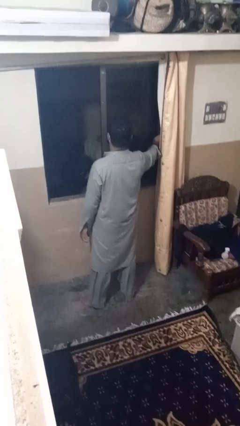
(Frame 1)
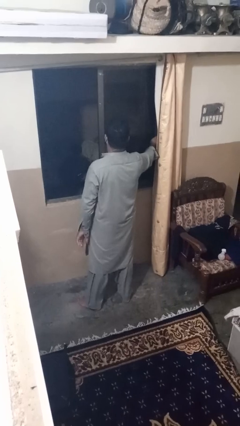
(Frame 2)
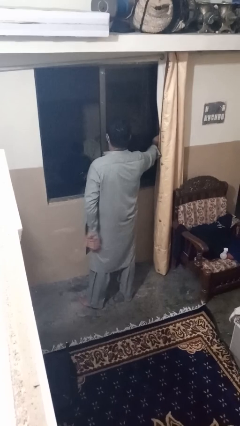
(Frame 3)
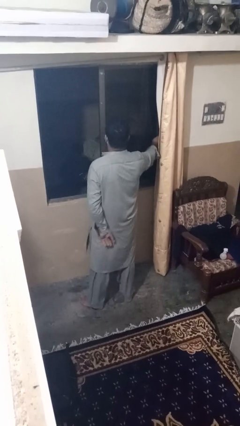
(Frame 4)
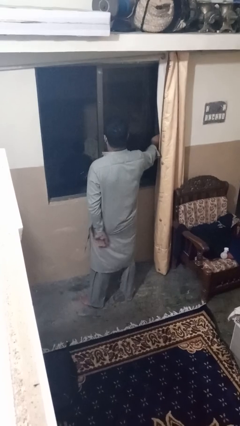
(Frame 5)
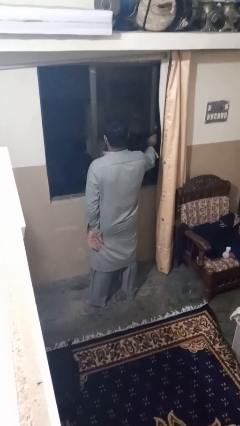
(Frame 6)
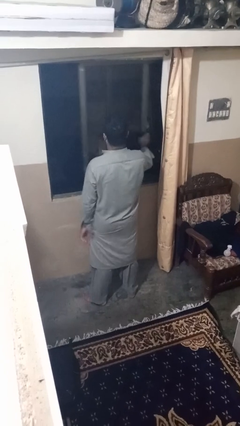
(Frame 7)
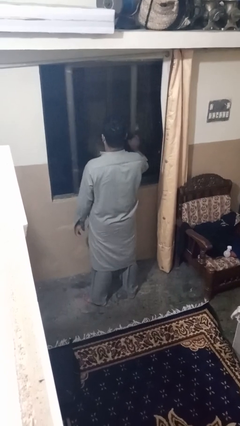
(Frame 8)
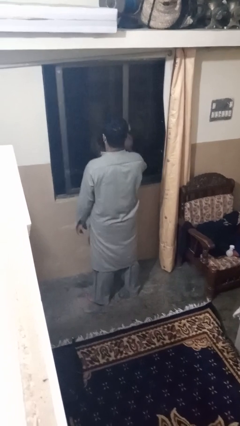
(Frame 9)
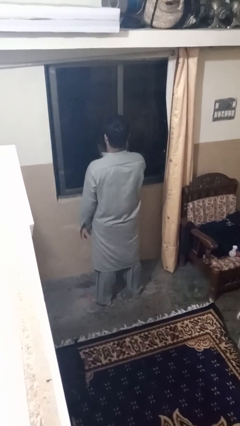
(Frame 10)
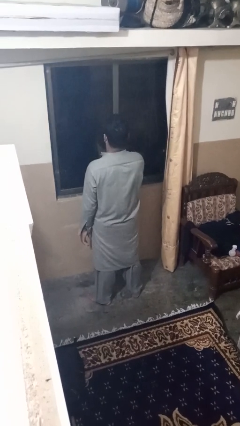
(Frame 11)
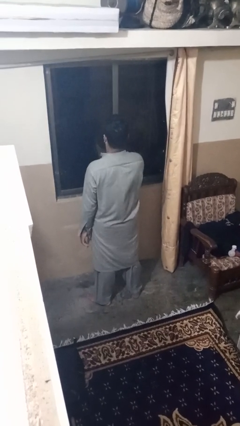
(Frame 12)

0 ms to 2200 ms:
person closes home window

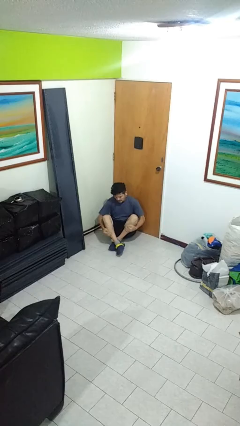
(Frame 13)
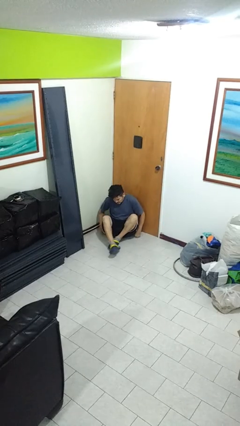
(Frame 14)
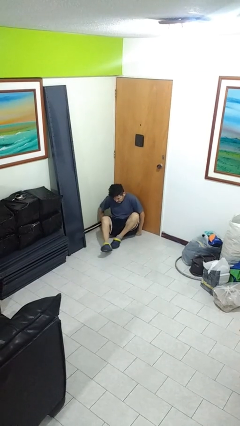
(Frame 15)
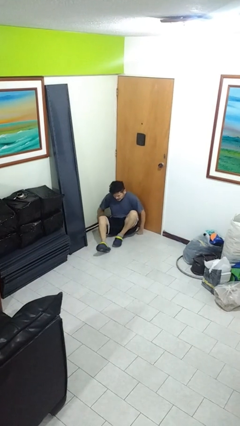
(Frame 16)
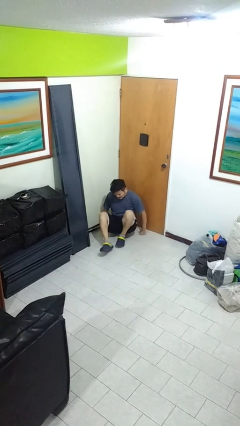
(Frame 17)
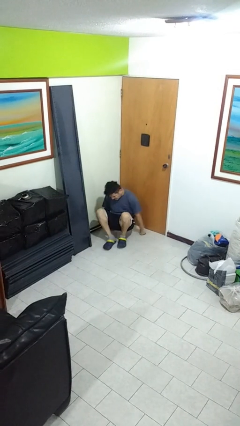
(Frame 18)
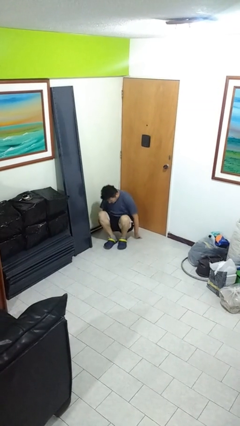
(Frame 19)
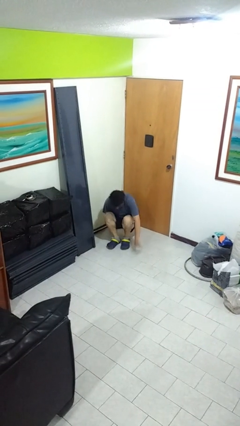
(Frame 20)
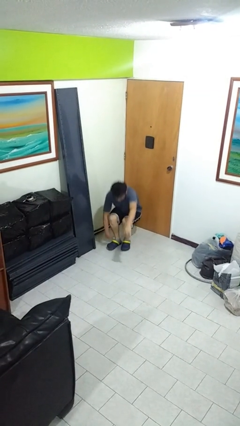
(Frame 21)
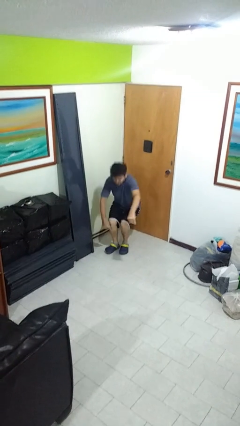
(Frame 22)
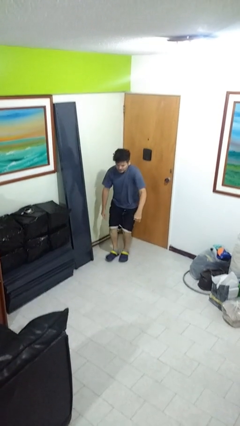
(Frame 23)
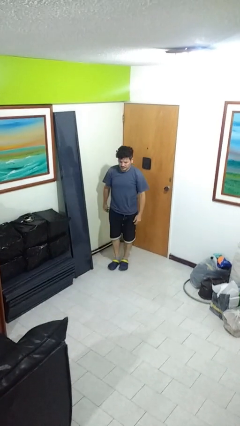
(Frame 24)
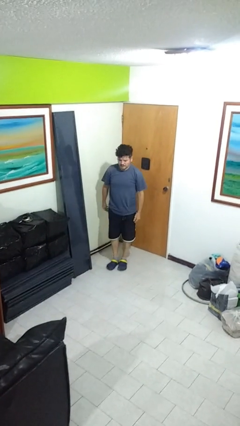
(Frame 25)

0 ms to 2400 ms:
person stands up from floor

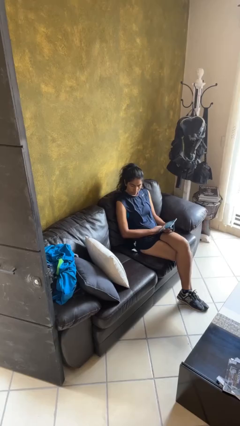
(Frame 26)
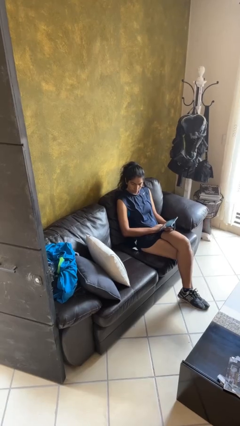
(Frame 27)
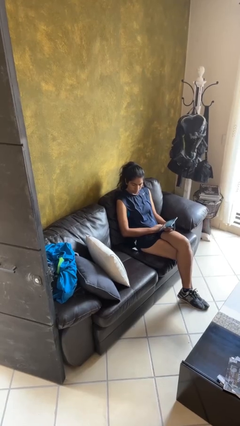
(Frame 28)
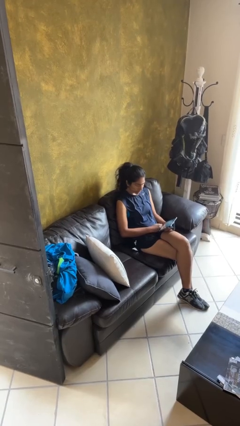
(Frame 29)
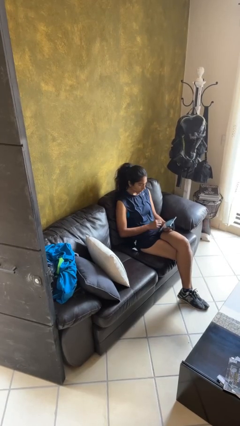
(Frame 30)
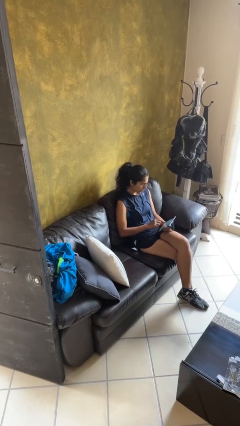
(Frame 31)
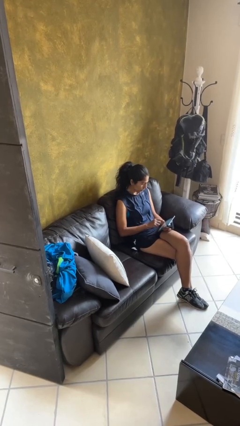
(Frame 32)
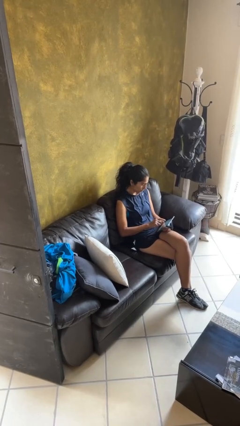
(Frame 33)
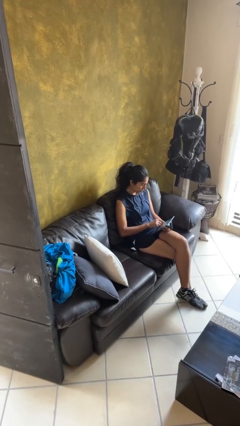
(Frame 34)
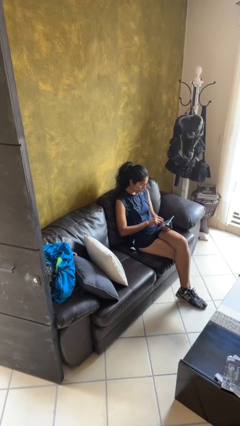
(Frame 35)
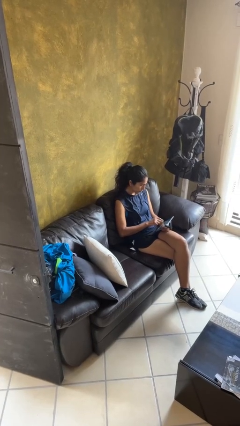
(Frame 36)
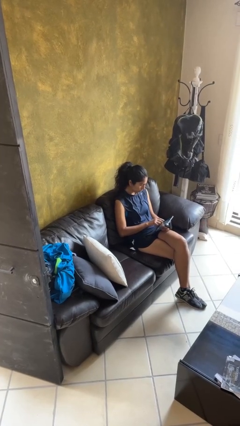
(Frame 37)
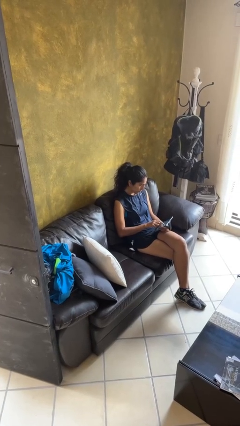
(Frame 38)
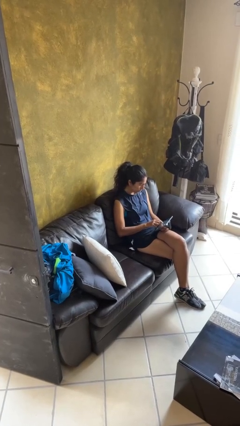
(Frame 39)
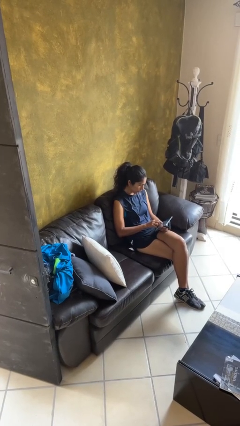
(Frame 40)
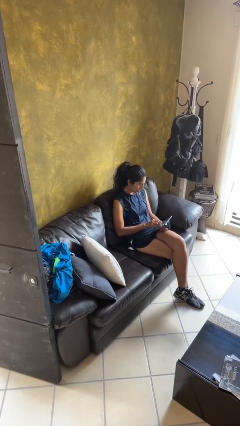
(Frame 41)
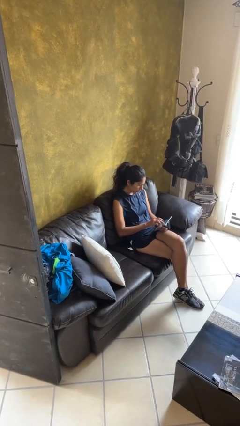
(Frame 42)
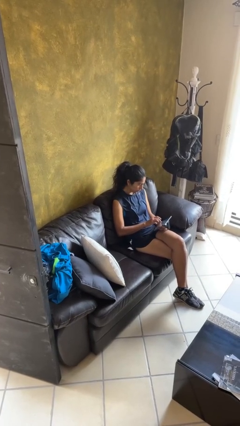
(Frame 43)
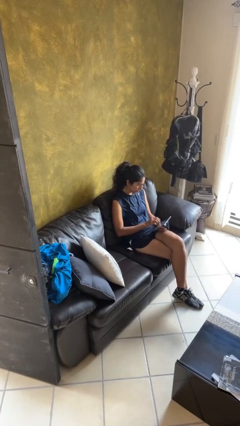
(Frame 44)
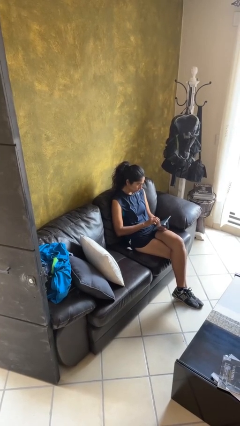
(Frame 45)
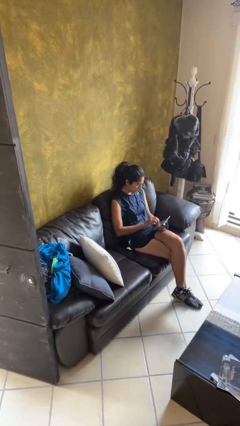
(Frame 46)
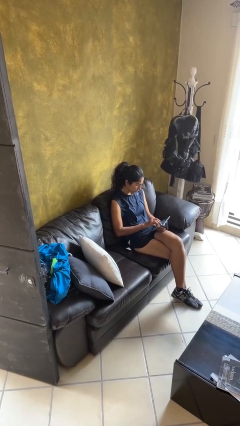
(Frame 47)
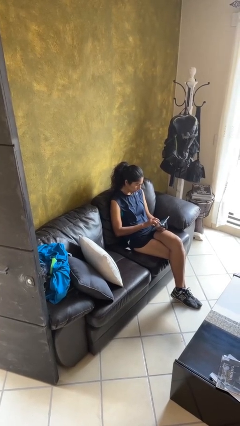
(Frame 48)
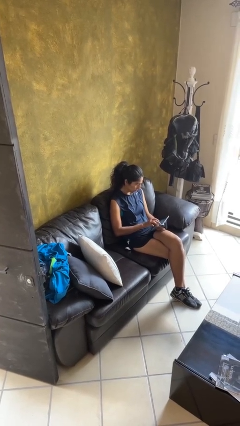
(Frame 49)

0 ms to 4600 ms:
person interacts with tablet

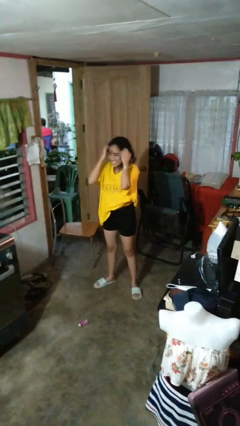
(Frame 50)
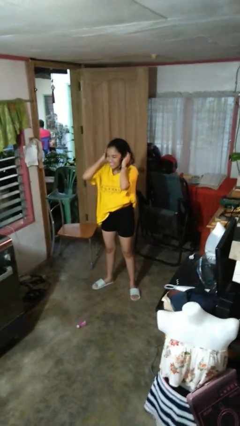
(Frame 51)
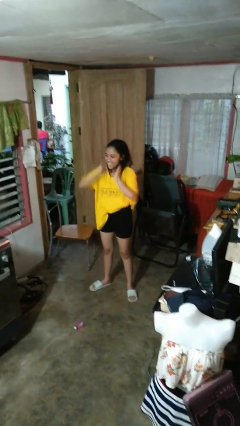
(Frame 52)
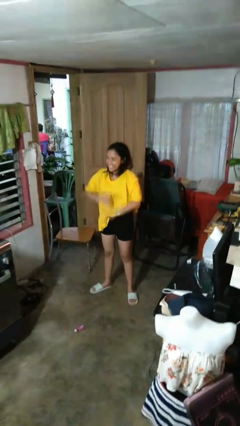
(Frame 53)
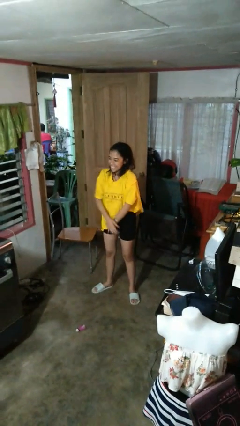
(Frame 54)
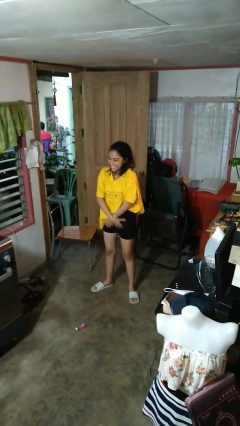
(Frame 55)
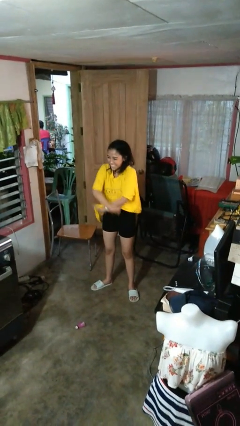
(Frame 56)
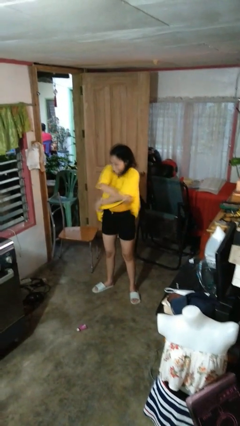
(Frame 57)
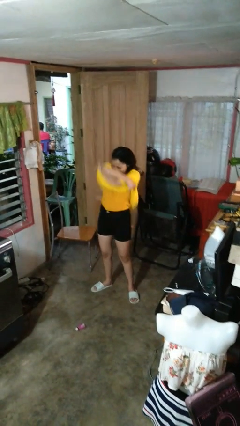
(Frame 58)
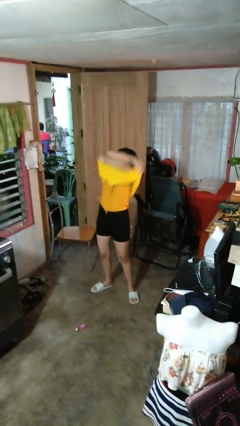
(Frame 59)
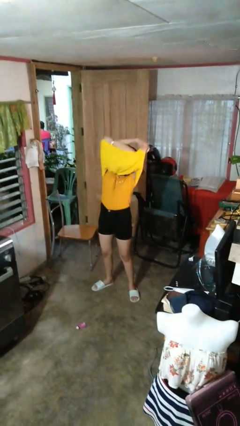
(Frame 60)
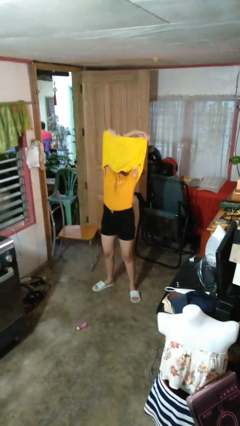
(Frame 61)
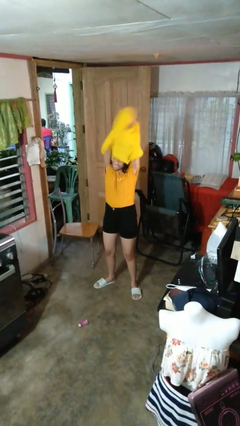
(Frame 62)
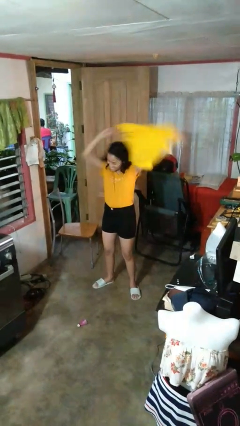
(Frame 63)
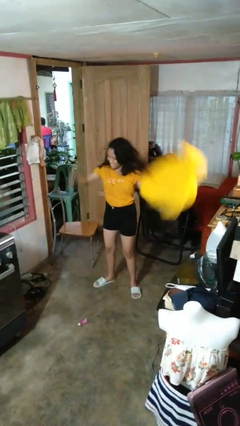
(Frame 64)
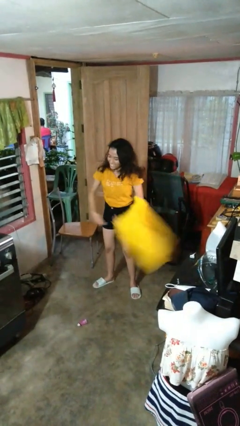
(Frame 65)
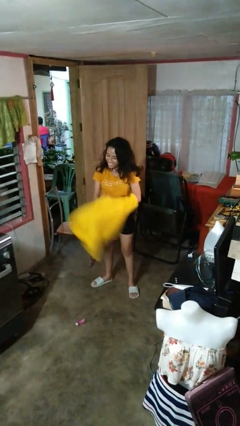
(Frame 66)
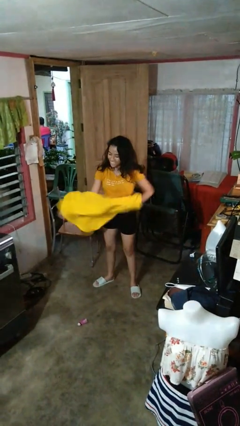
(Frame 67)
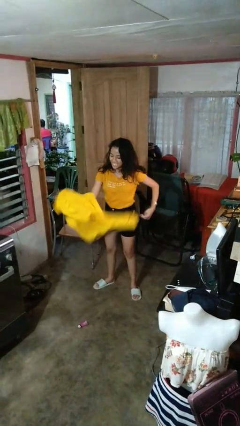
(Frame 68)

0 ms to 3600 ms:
person takes off shirt

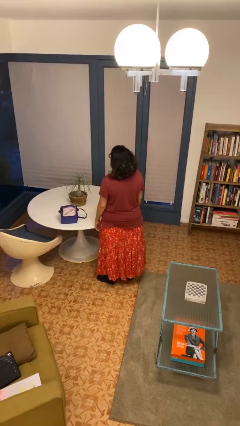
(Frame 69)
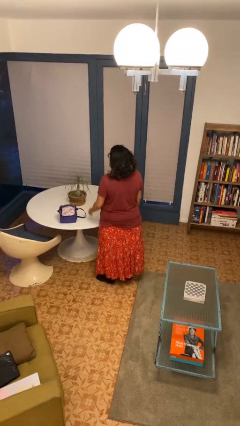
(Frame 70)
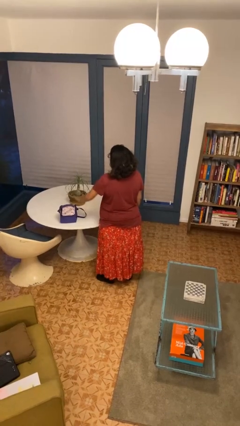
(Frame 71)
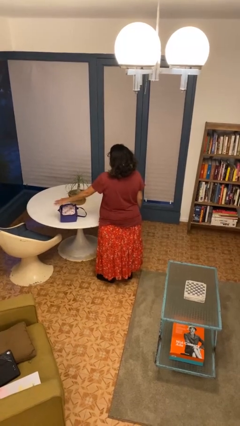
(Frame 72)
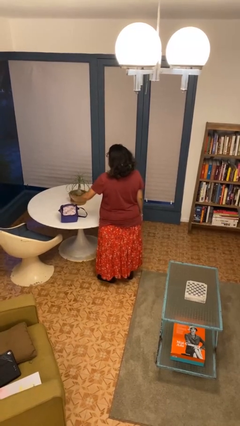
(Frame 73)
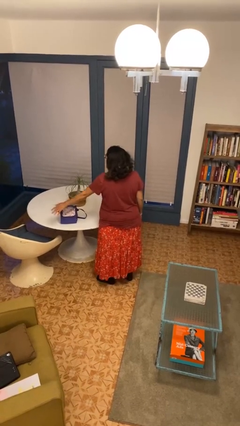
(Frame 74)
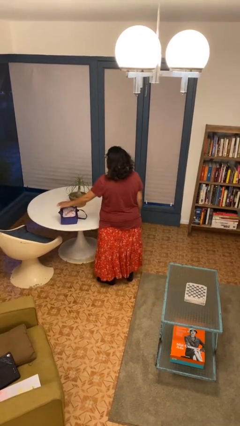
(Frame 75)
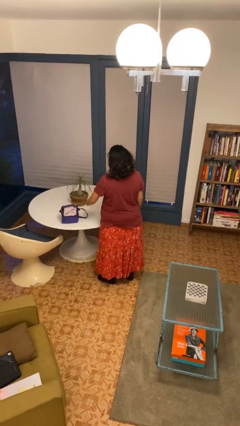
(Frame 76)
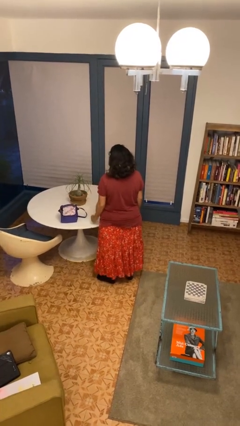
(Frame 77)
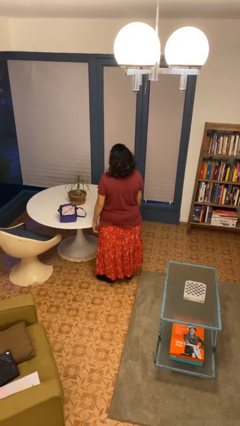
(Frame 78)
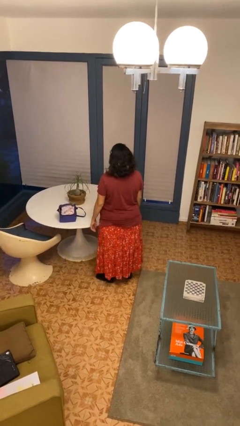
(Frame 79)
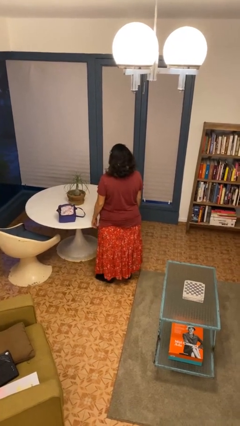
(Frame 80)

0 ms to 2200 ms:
person waves hand over object

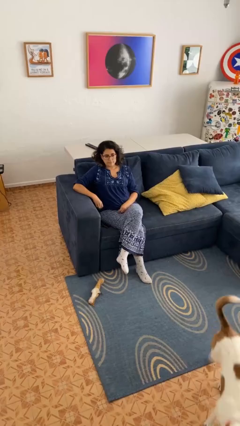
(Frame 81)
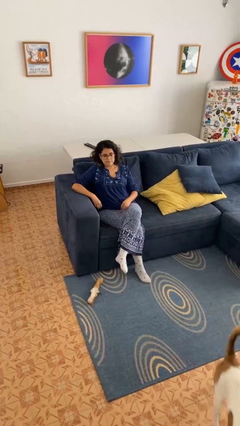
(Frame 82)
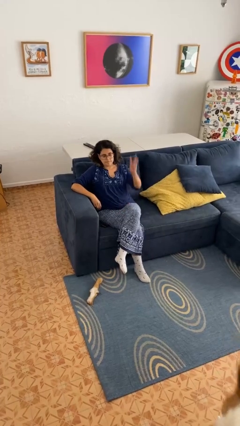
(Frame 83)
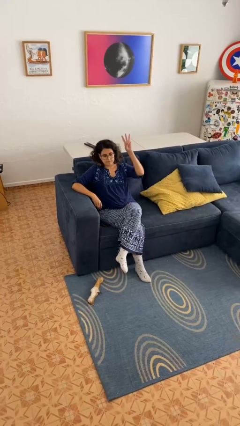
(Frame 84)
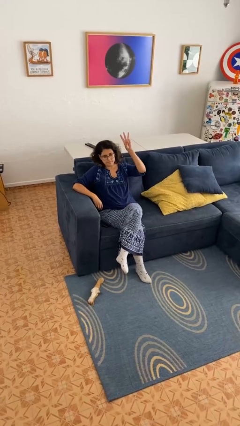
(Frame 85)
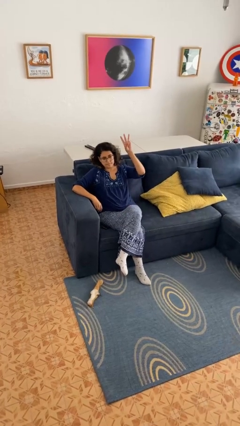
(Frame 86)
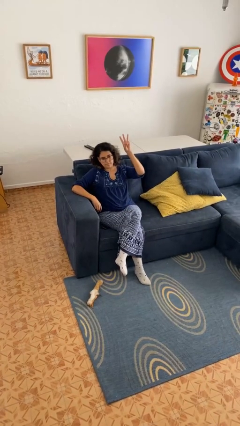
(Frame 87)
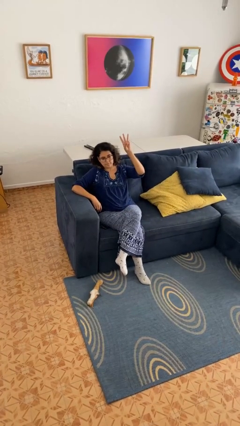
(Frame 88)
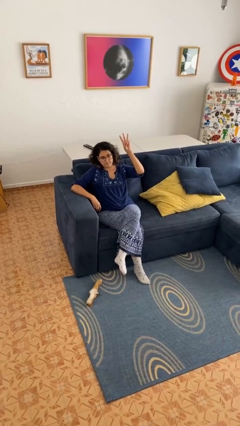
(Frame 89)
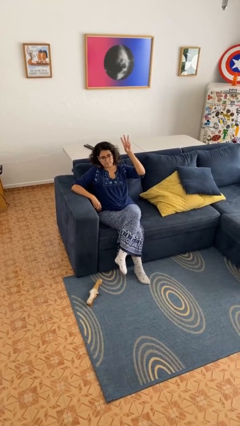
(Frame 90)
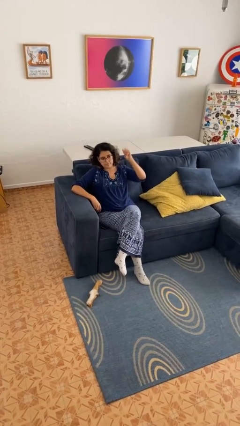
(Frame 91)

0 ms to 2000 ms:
person gestures number three

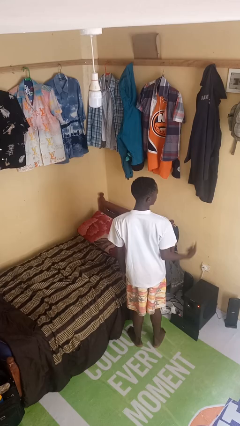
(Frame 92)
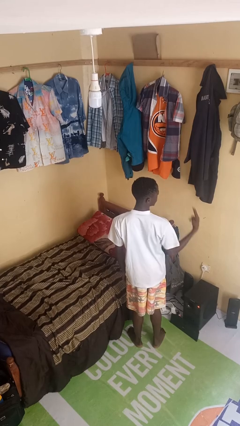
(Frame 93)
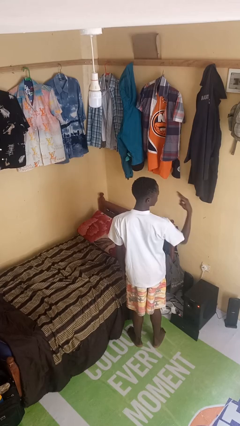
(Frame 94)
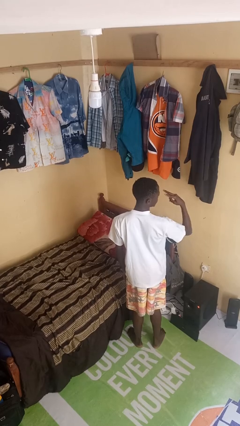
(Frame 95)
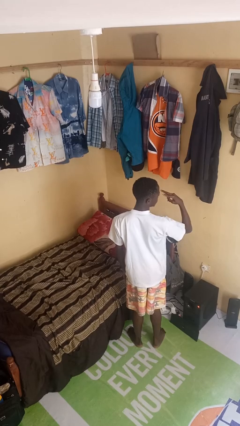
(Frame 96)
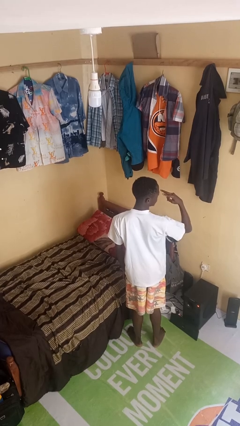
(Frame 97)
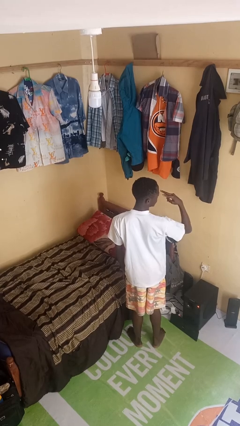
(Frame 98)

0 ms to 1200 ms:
person gestures watch closely
